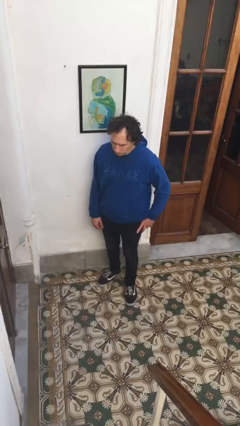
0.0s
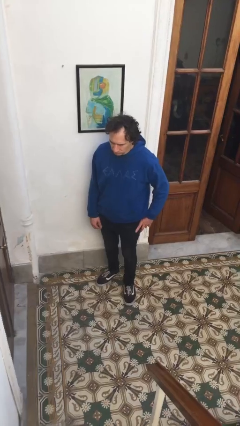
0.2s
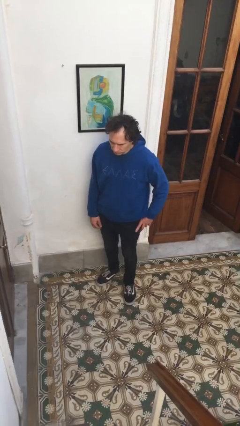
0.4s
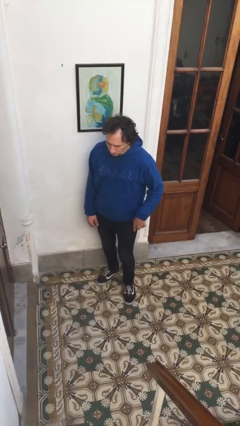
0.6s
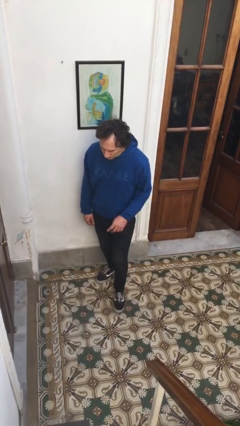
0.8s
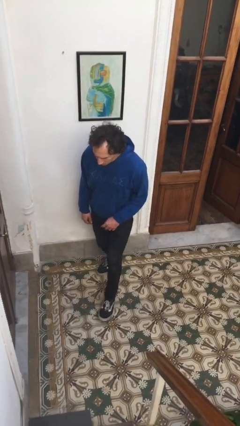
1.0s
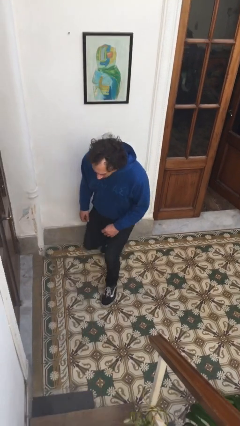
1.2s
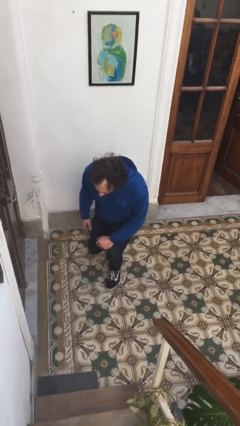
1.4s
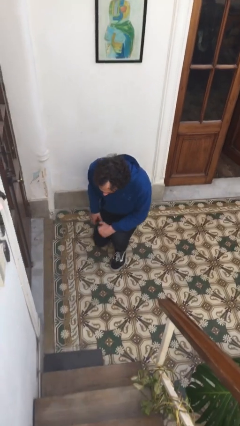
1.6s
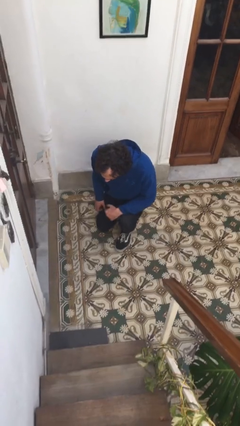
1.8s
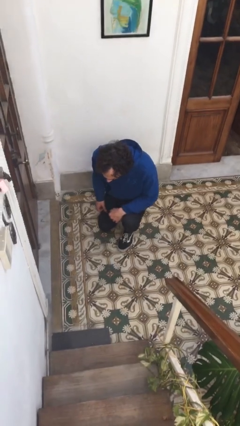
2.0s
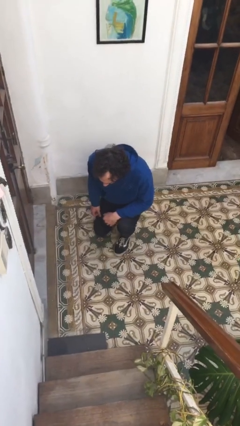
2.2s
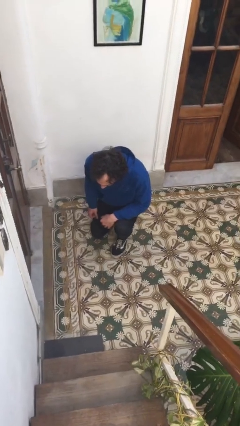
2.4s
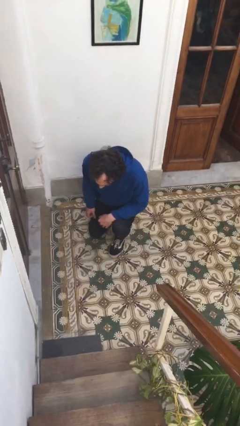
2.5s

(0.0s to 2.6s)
person kneels

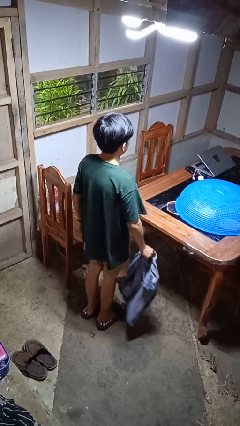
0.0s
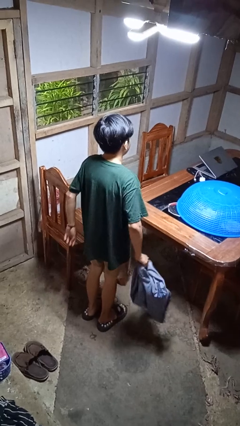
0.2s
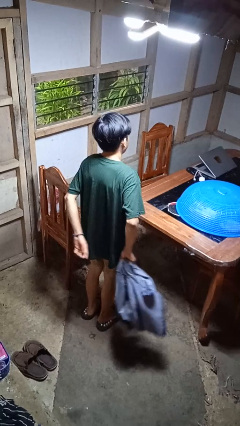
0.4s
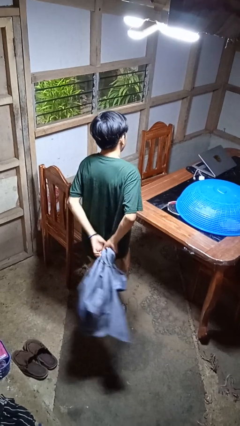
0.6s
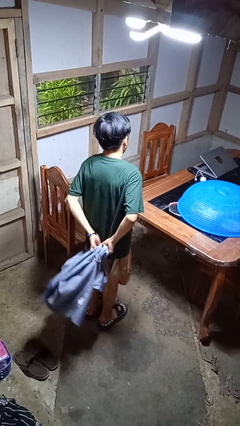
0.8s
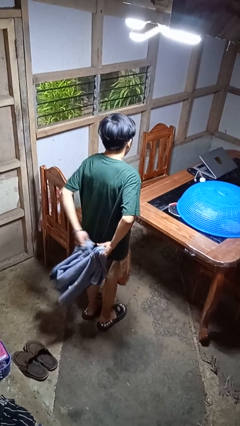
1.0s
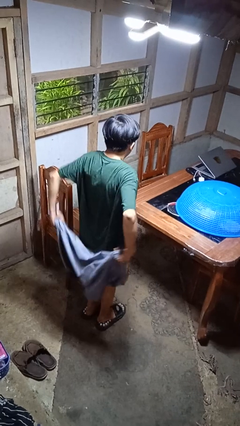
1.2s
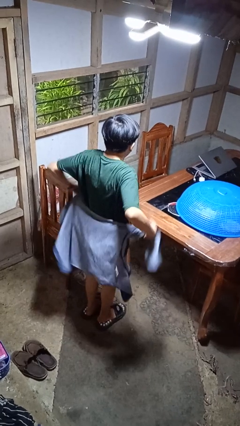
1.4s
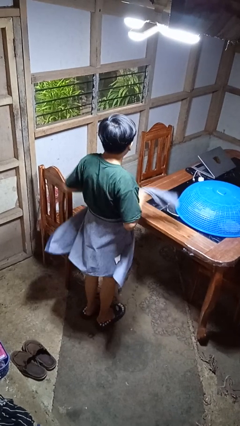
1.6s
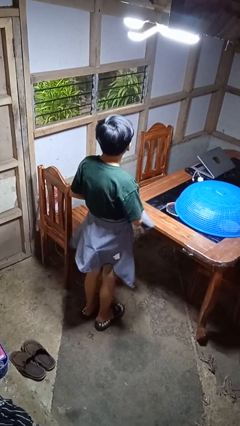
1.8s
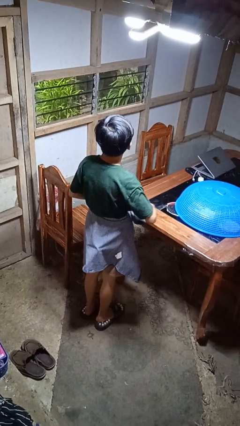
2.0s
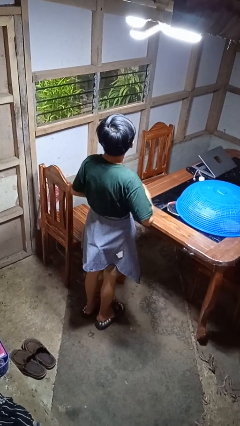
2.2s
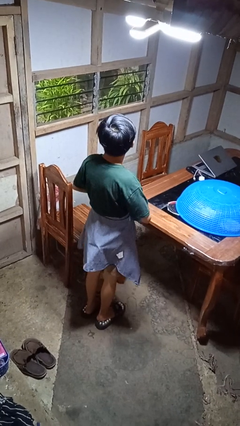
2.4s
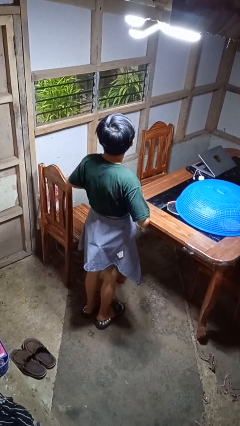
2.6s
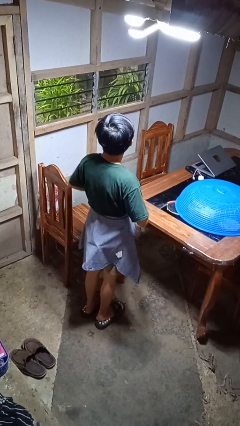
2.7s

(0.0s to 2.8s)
person ties jacket around waist

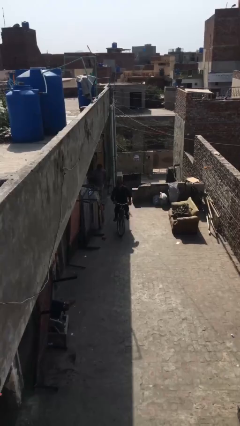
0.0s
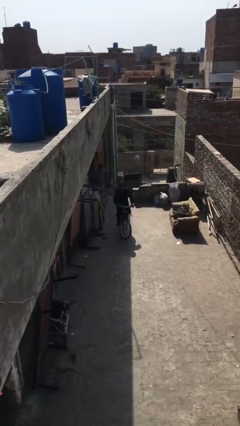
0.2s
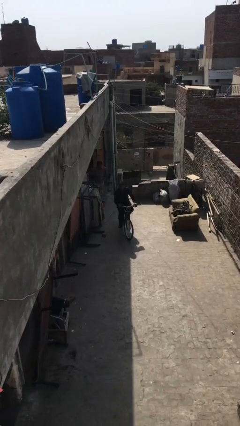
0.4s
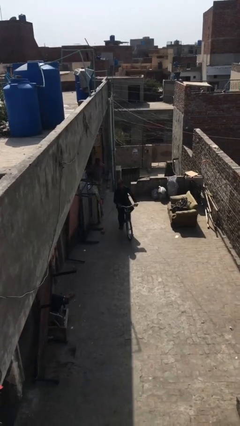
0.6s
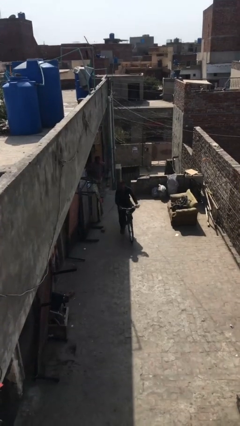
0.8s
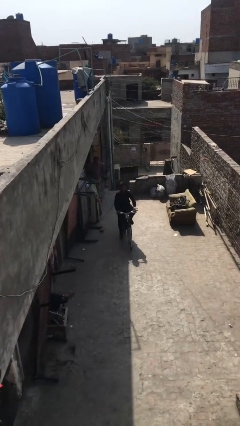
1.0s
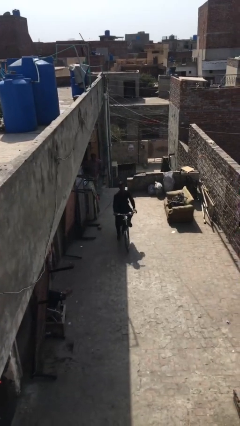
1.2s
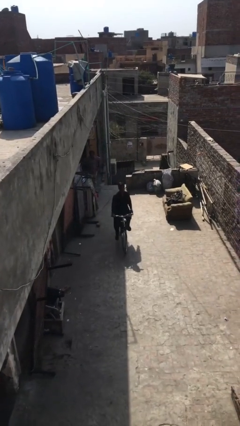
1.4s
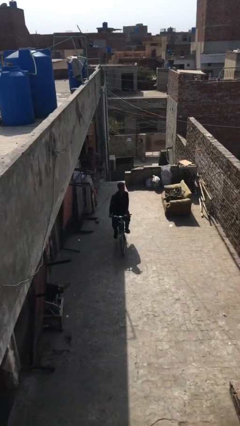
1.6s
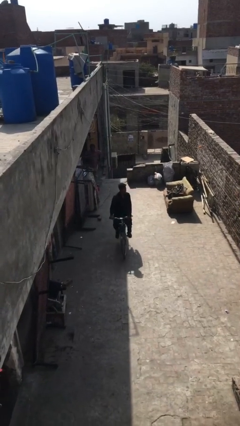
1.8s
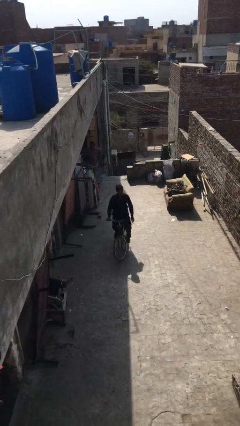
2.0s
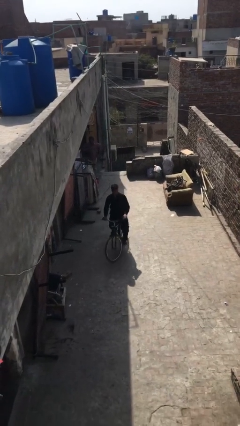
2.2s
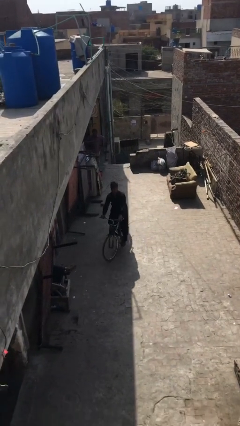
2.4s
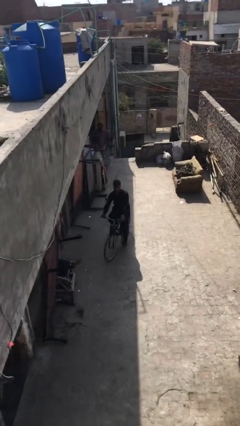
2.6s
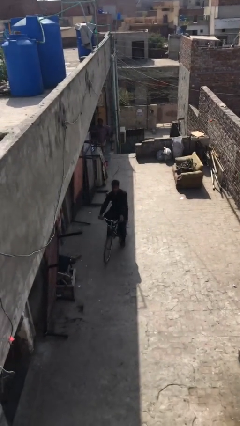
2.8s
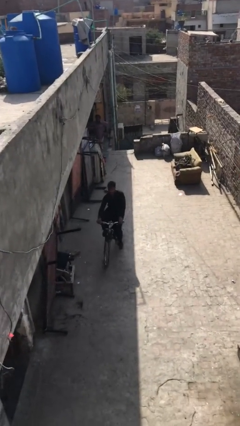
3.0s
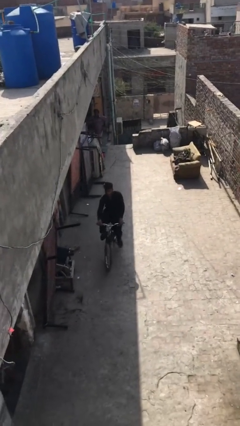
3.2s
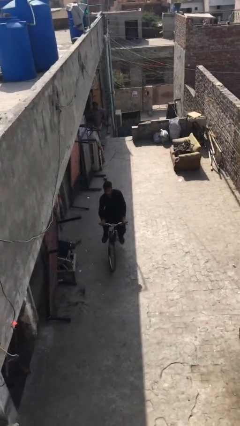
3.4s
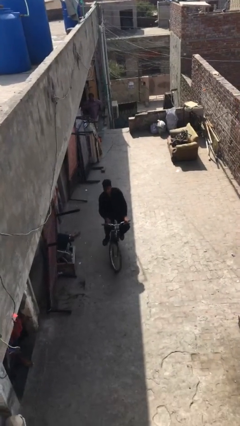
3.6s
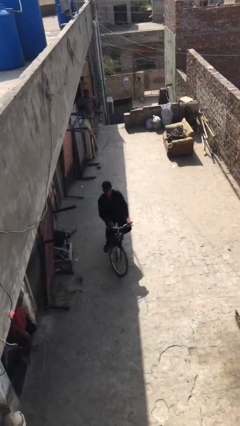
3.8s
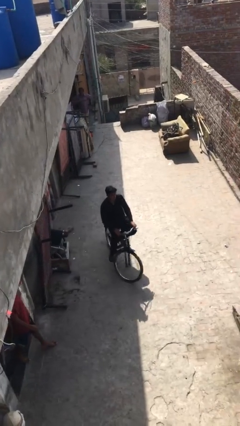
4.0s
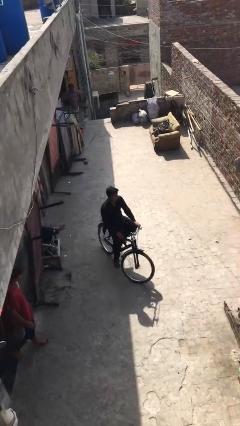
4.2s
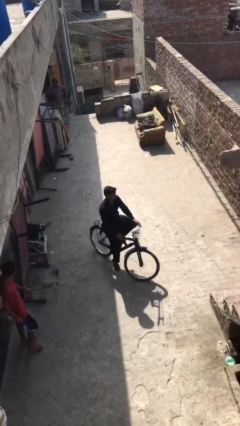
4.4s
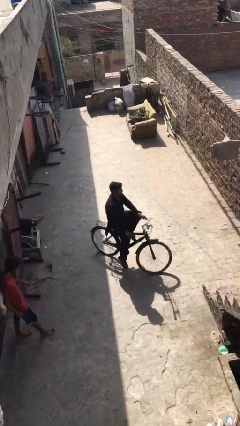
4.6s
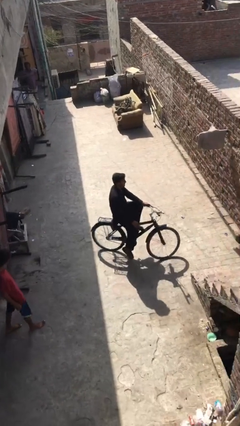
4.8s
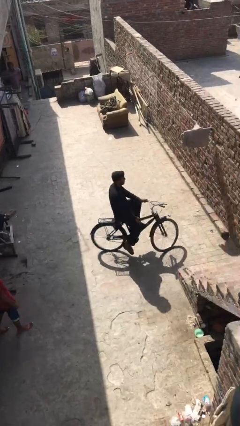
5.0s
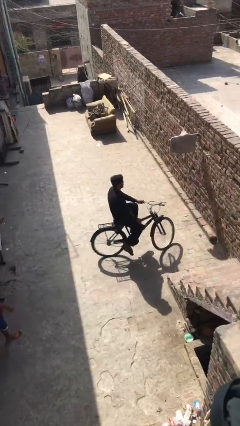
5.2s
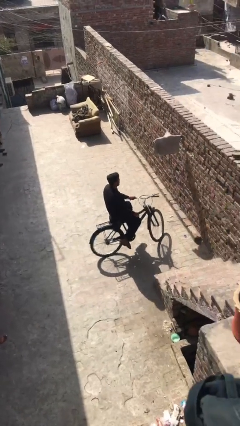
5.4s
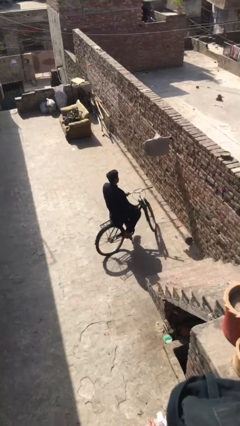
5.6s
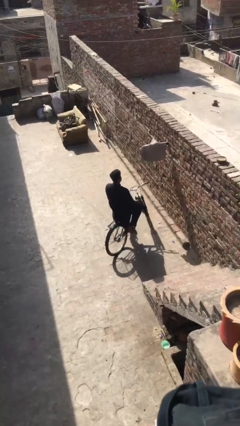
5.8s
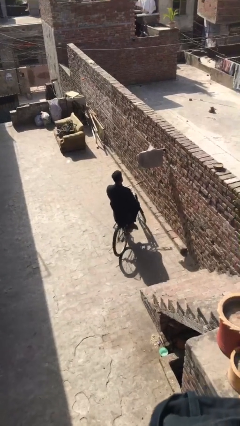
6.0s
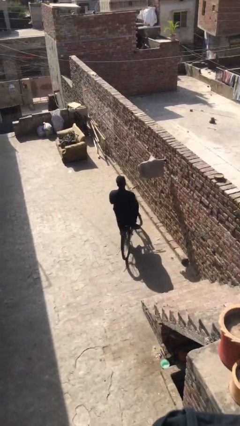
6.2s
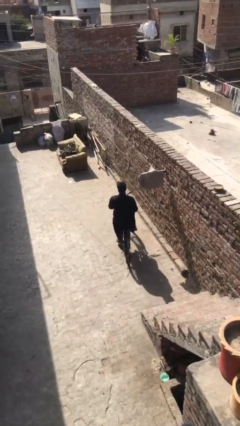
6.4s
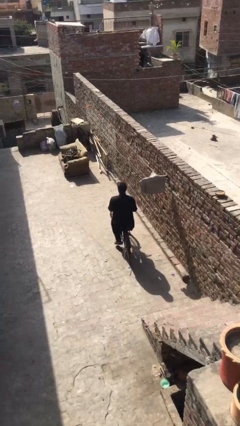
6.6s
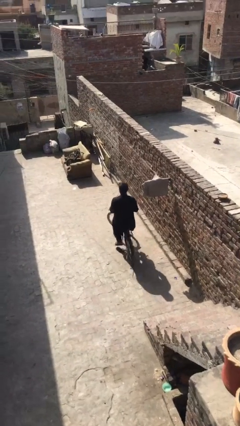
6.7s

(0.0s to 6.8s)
person rides bicycle

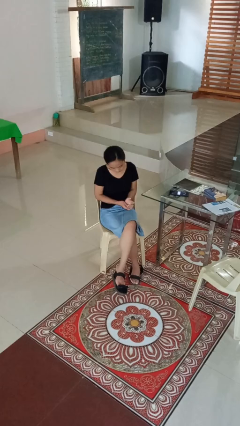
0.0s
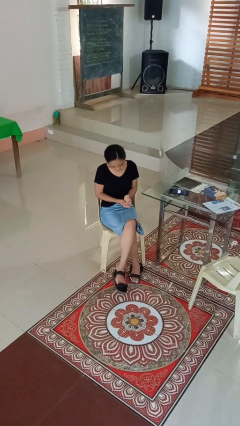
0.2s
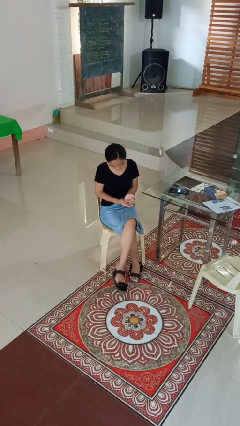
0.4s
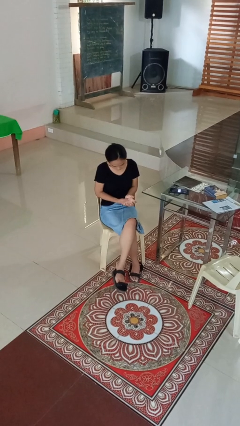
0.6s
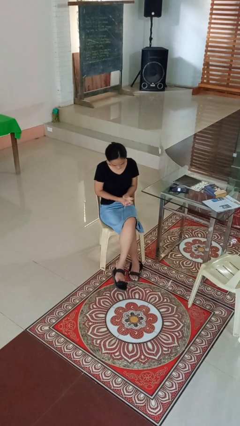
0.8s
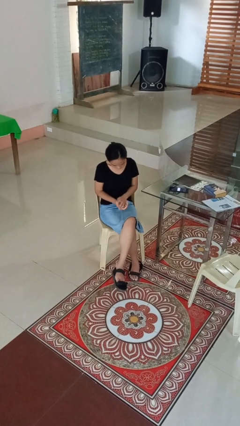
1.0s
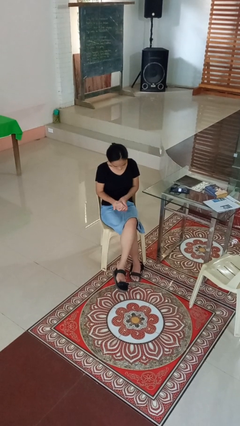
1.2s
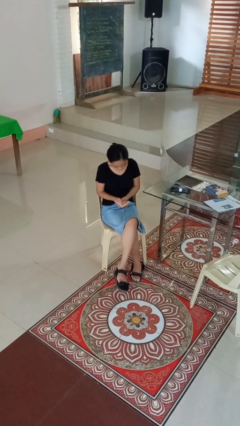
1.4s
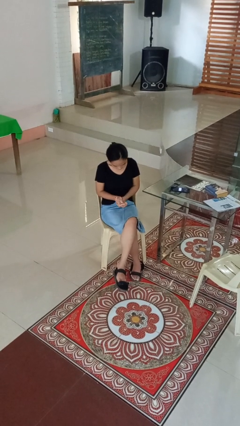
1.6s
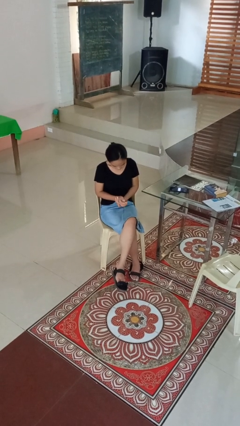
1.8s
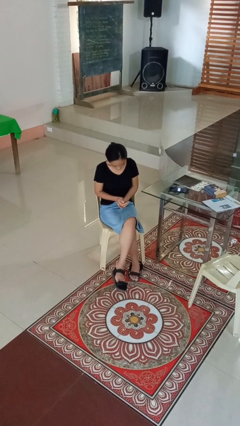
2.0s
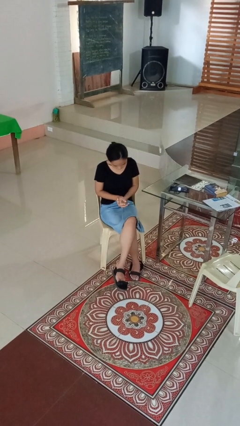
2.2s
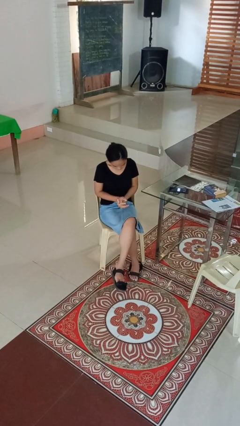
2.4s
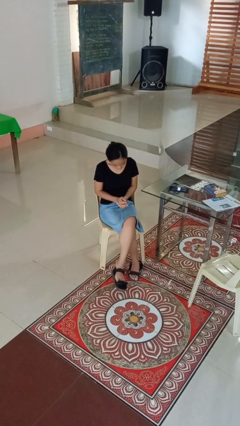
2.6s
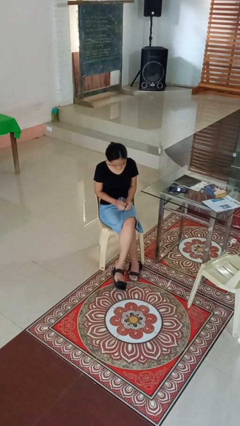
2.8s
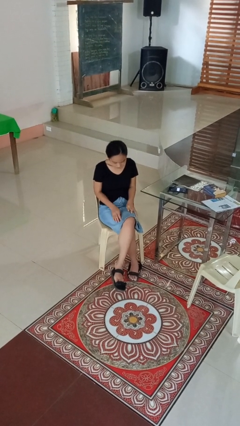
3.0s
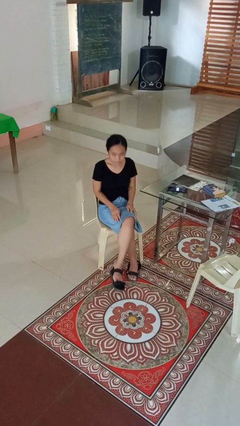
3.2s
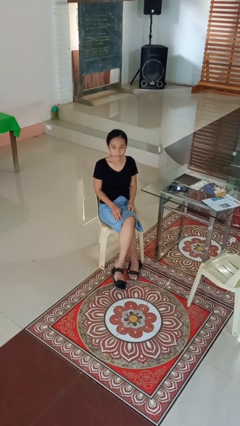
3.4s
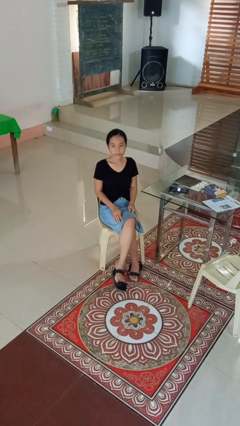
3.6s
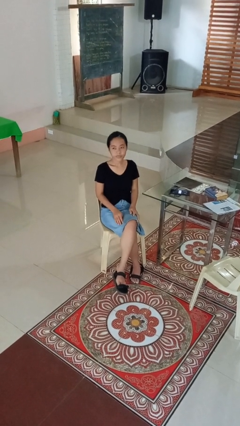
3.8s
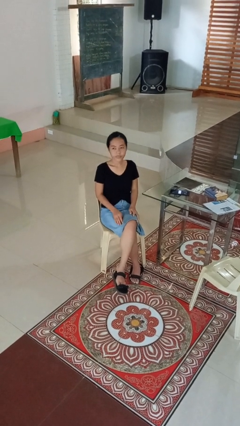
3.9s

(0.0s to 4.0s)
person looks at hands in lap

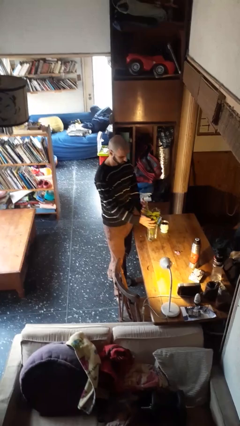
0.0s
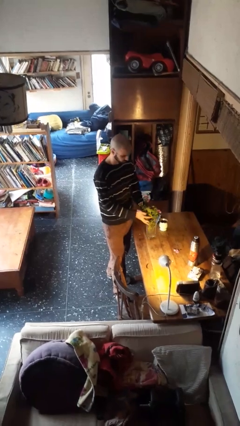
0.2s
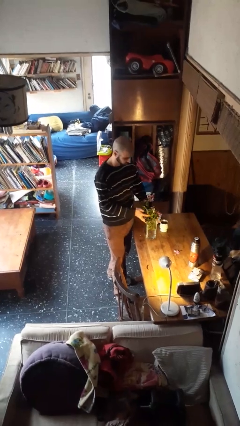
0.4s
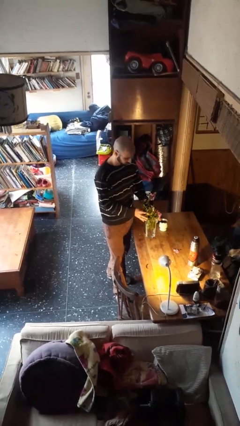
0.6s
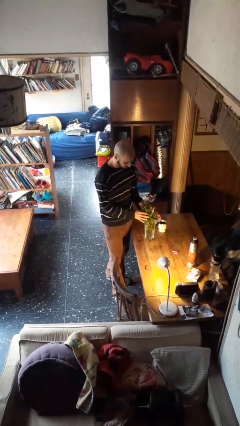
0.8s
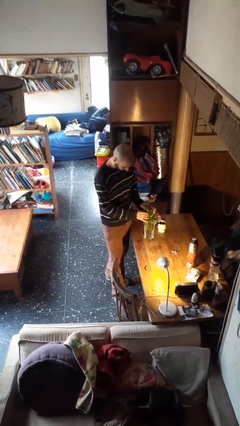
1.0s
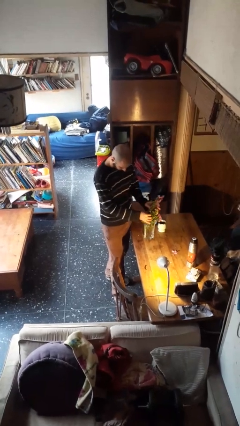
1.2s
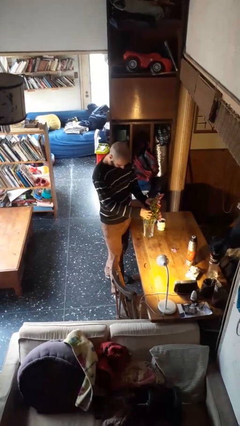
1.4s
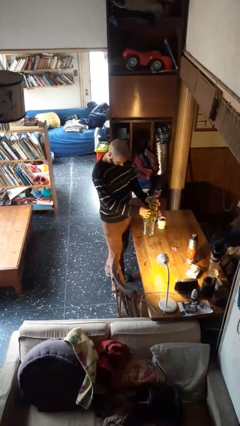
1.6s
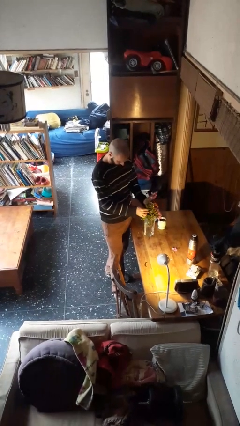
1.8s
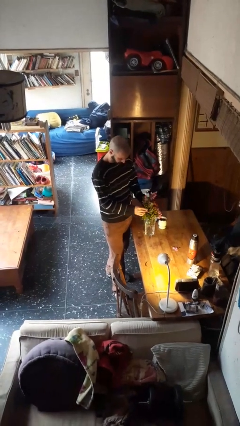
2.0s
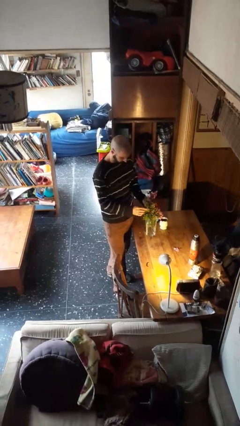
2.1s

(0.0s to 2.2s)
person arranges flowers in vase
